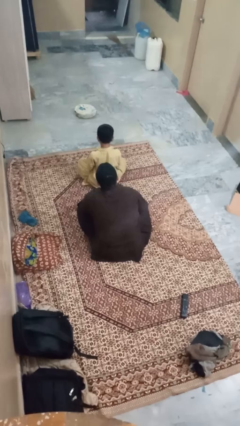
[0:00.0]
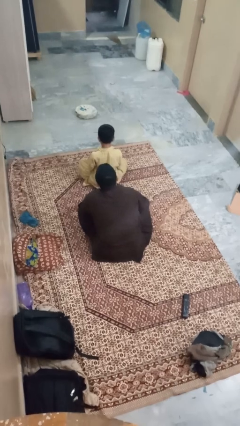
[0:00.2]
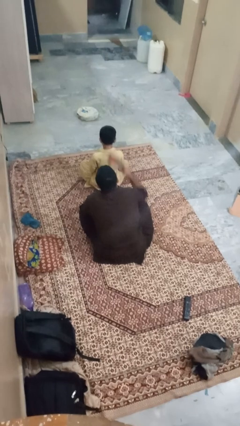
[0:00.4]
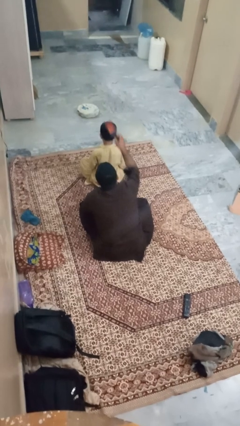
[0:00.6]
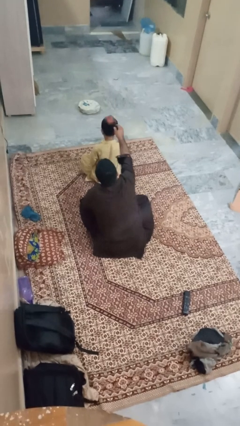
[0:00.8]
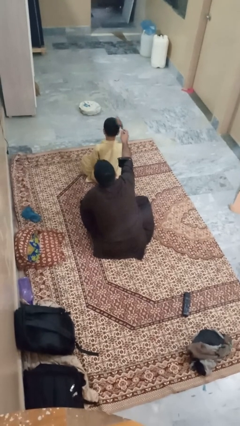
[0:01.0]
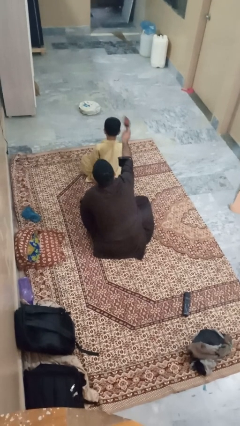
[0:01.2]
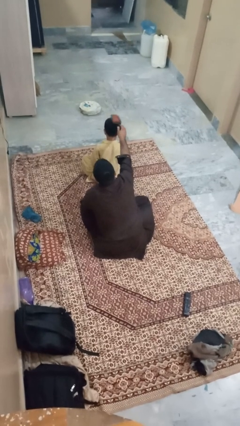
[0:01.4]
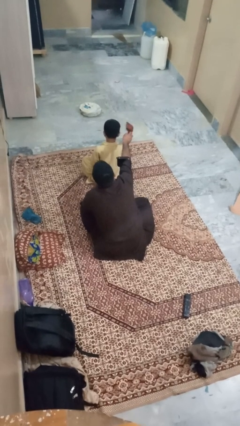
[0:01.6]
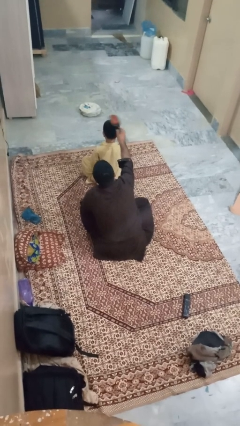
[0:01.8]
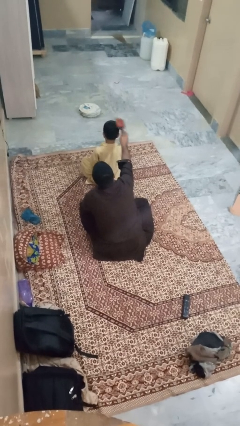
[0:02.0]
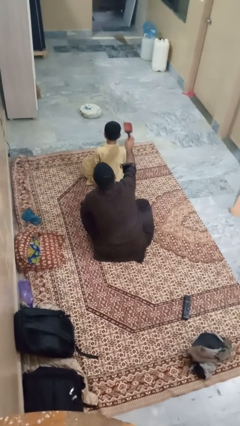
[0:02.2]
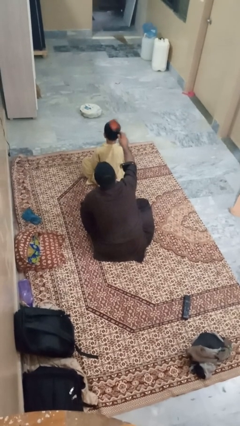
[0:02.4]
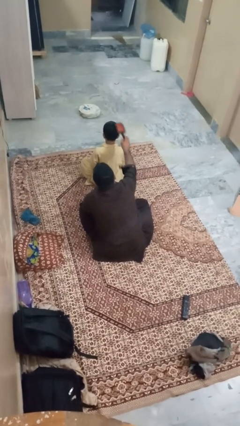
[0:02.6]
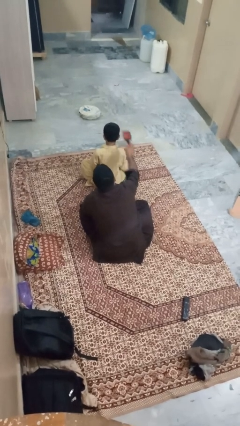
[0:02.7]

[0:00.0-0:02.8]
person brushes hair of person

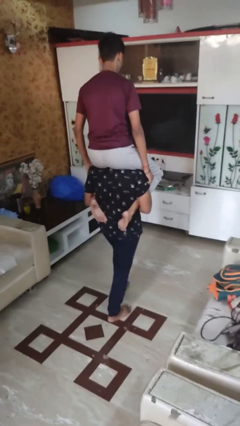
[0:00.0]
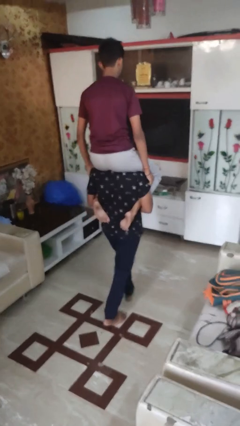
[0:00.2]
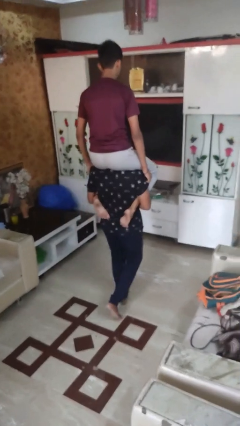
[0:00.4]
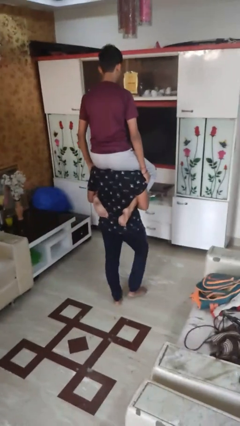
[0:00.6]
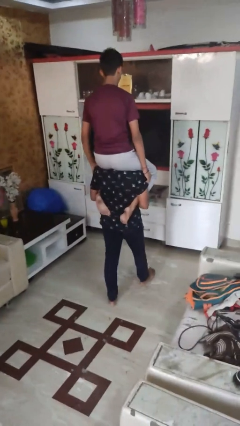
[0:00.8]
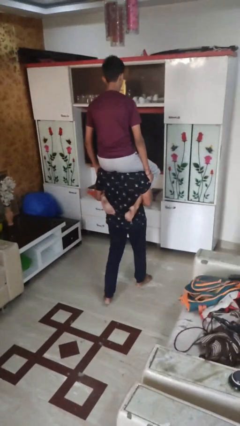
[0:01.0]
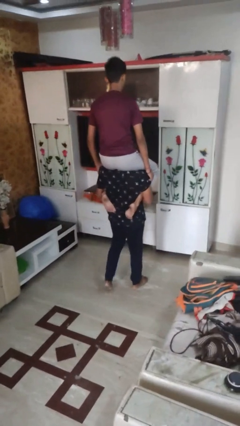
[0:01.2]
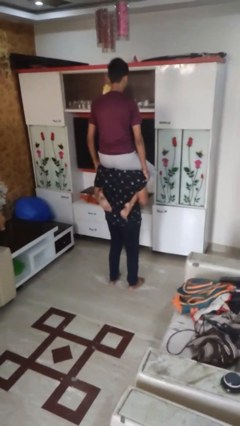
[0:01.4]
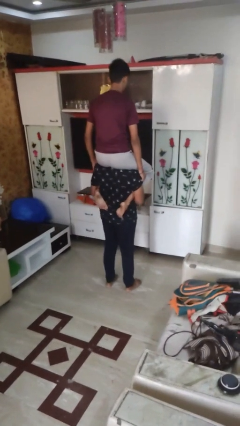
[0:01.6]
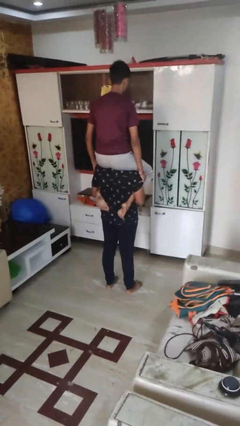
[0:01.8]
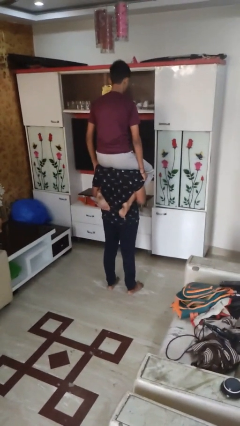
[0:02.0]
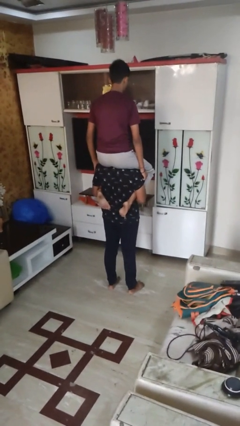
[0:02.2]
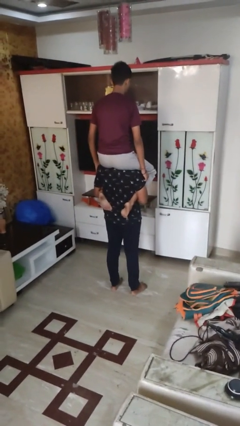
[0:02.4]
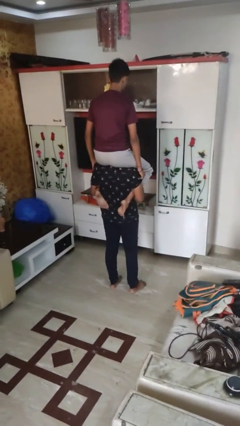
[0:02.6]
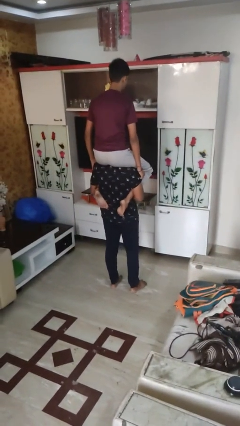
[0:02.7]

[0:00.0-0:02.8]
person carries person on shoulders

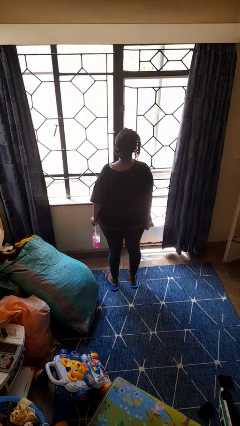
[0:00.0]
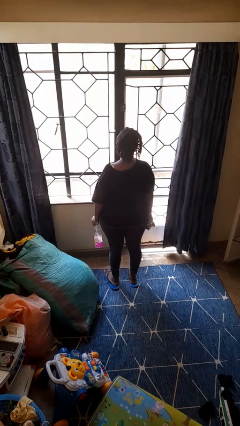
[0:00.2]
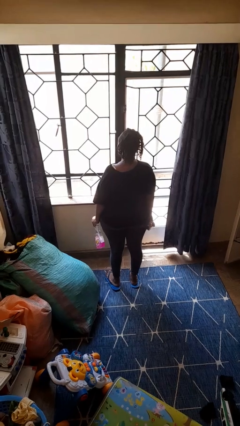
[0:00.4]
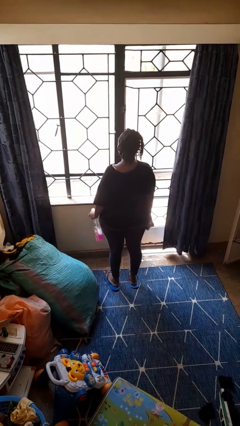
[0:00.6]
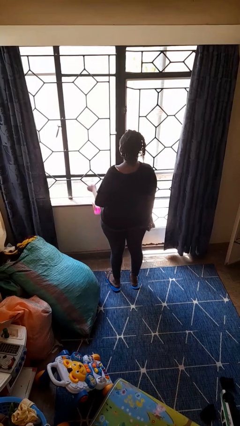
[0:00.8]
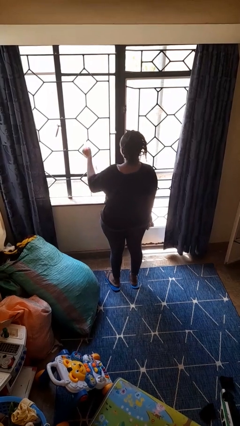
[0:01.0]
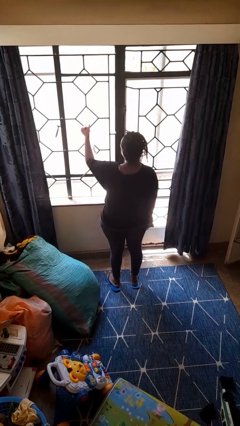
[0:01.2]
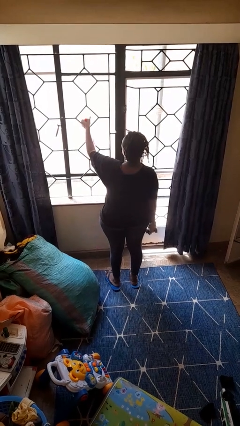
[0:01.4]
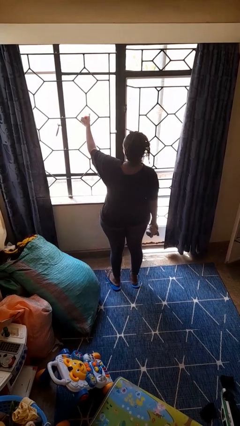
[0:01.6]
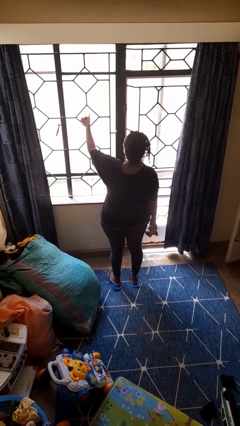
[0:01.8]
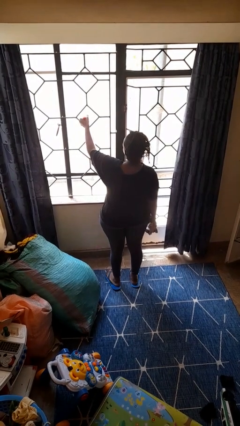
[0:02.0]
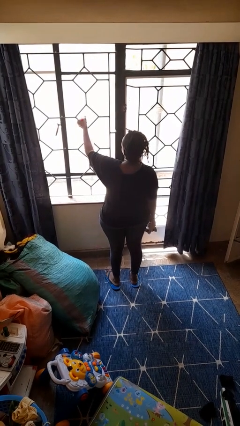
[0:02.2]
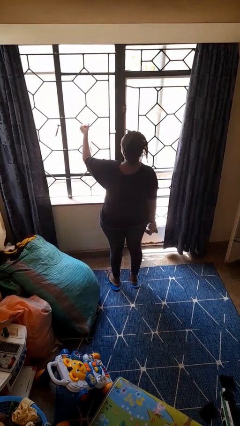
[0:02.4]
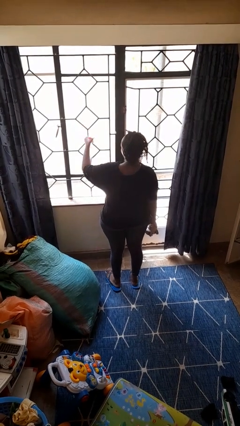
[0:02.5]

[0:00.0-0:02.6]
person sprays from bottle

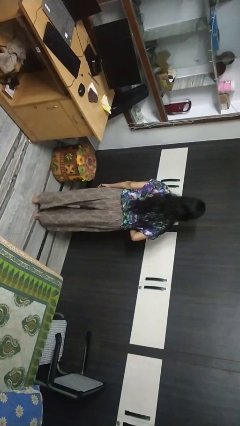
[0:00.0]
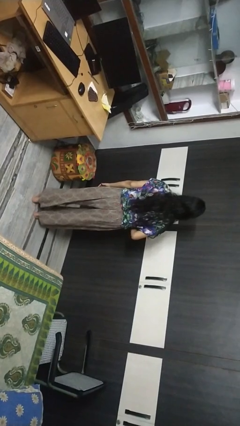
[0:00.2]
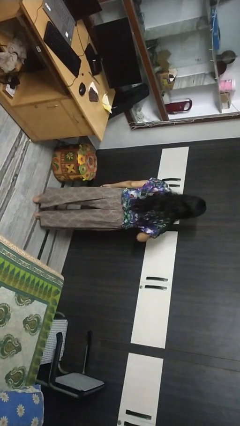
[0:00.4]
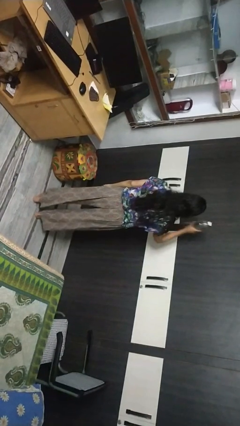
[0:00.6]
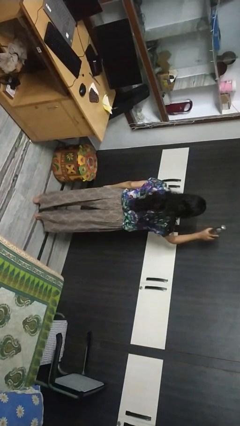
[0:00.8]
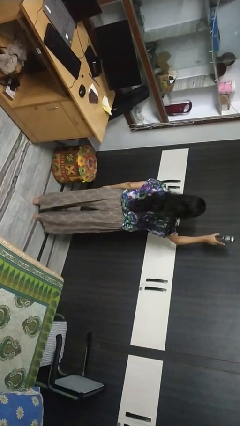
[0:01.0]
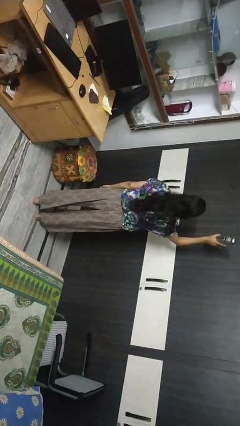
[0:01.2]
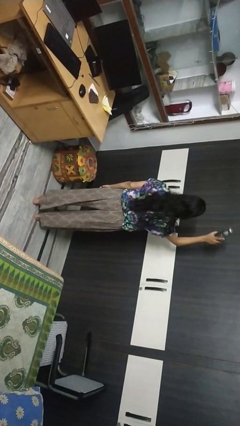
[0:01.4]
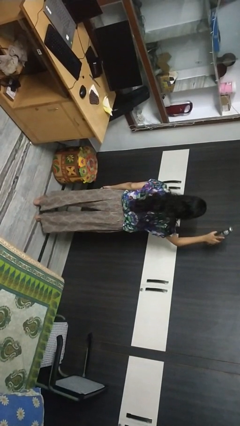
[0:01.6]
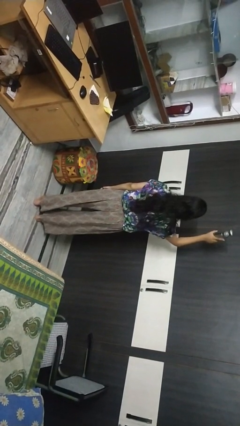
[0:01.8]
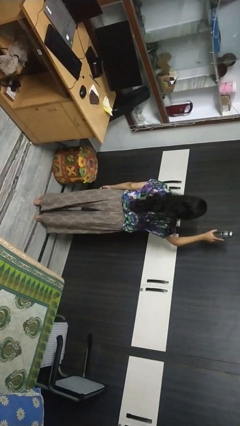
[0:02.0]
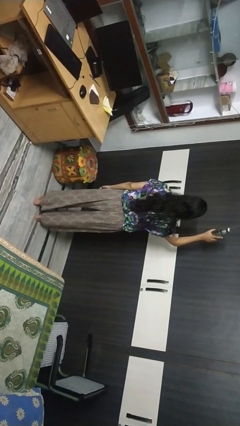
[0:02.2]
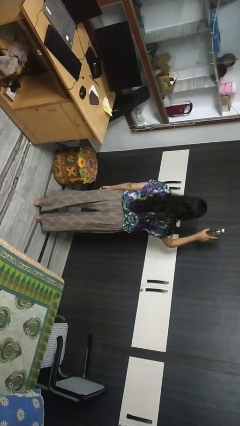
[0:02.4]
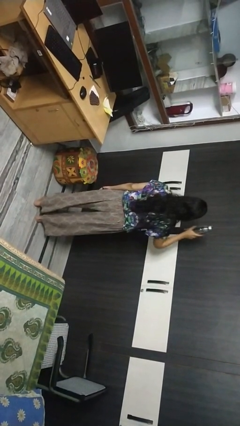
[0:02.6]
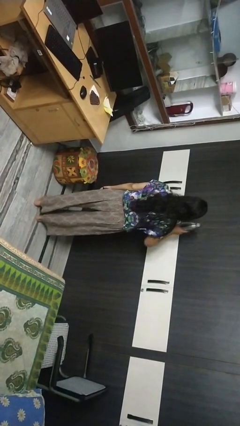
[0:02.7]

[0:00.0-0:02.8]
person holds object above head

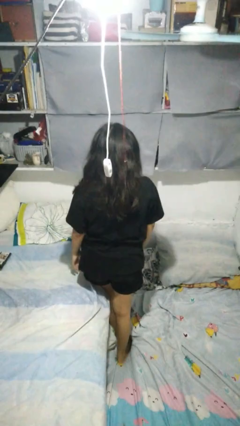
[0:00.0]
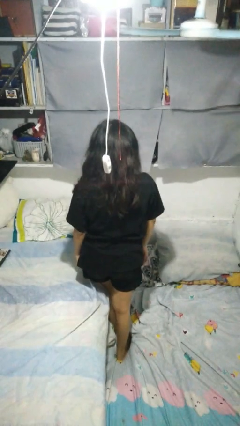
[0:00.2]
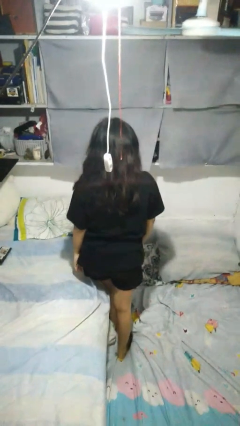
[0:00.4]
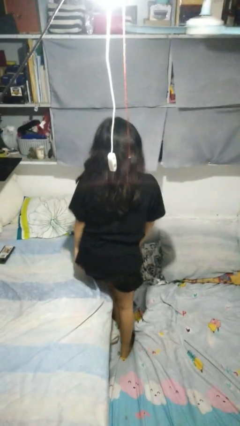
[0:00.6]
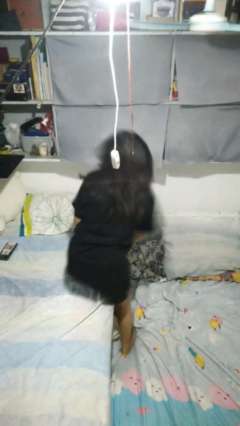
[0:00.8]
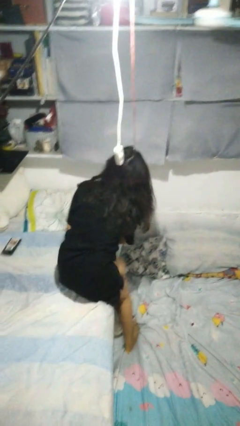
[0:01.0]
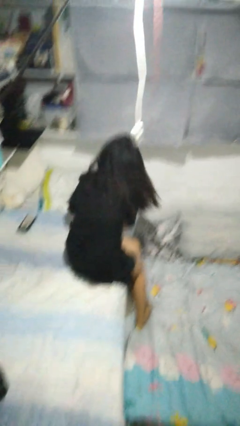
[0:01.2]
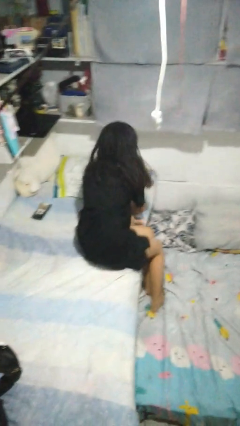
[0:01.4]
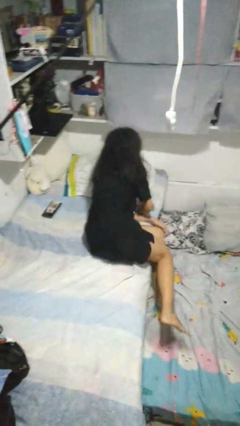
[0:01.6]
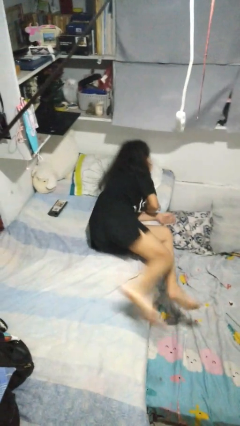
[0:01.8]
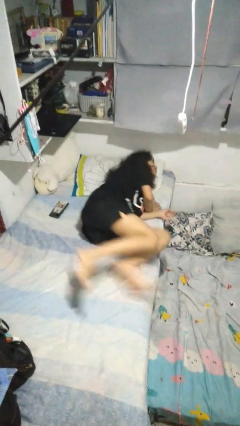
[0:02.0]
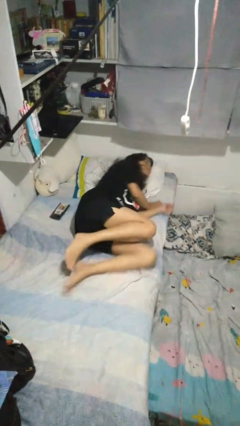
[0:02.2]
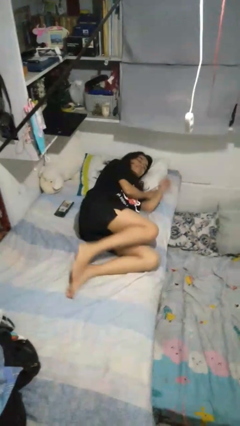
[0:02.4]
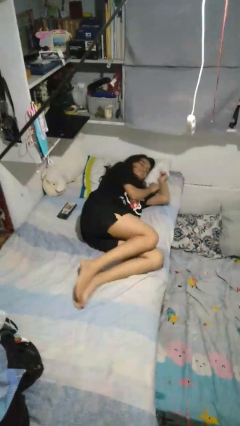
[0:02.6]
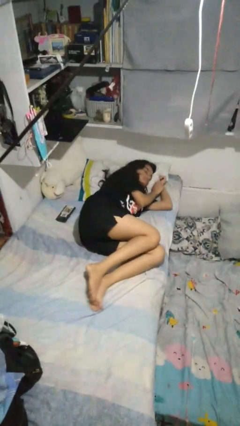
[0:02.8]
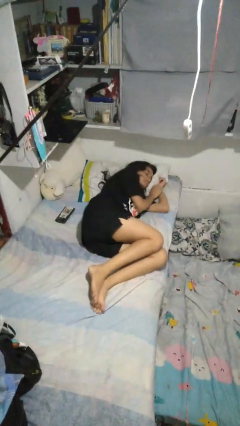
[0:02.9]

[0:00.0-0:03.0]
person lies down on bed

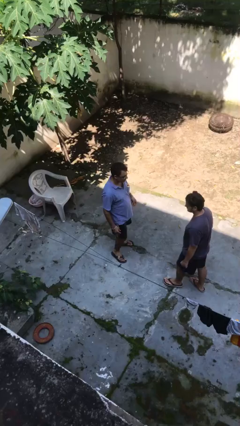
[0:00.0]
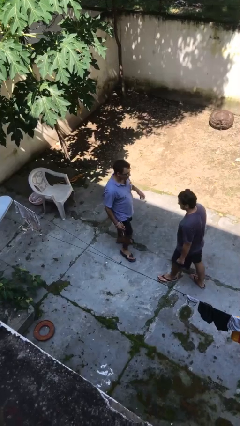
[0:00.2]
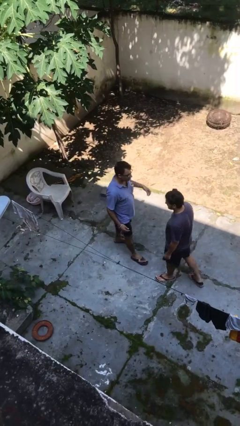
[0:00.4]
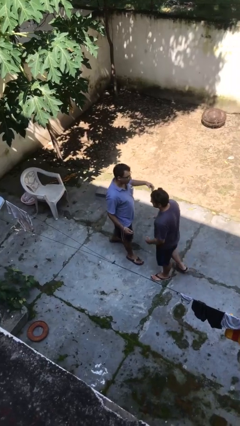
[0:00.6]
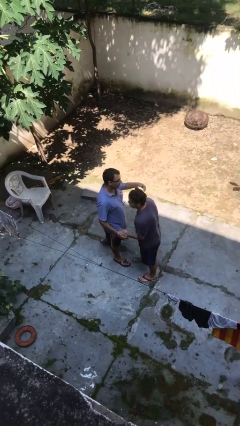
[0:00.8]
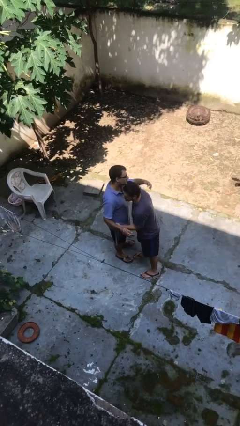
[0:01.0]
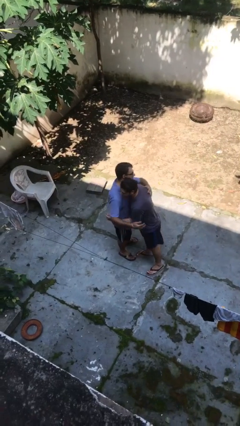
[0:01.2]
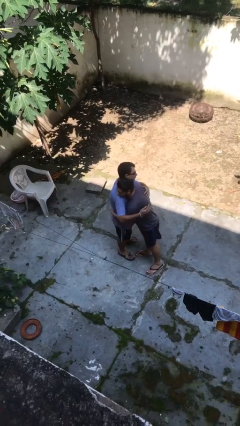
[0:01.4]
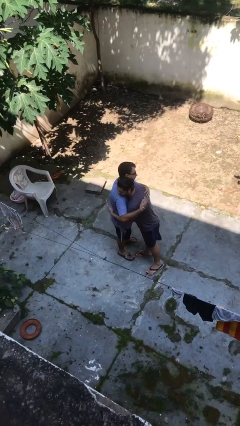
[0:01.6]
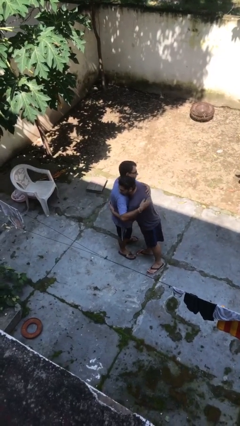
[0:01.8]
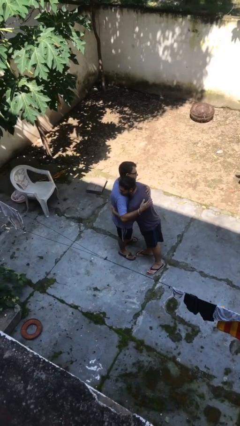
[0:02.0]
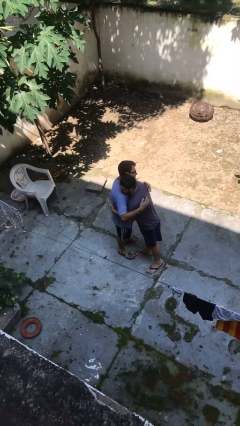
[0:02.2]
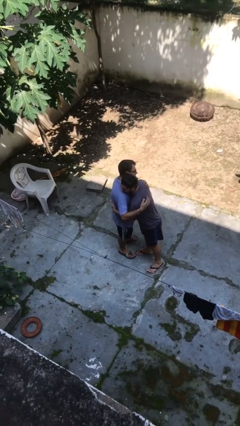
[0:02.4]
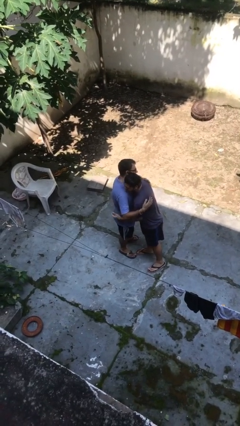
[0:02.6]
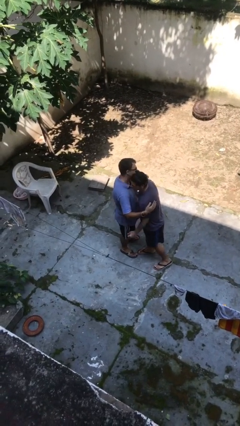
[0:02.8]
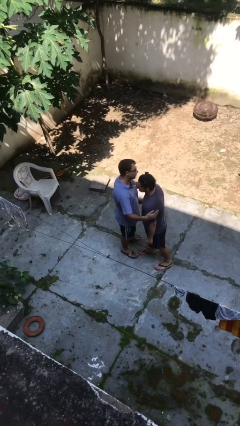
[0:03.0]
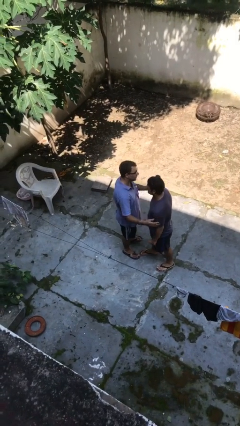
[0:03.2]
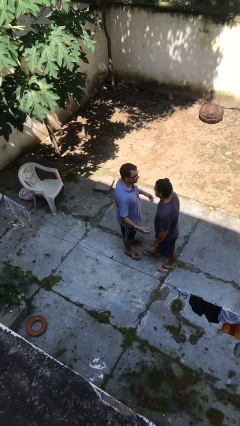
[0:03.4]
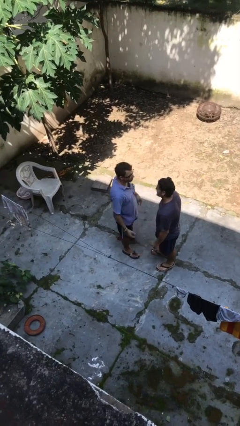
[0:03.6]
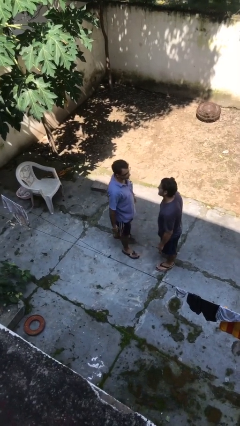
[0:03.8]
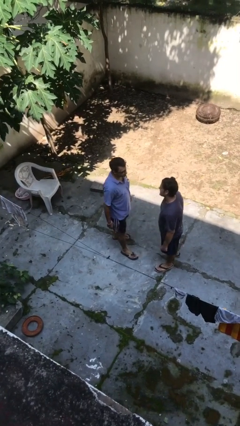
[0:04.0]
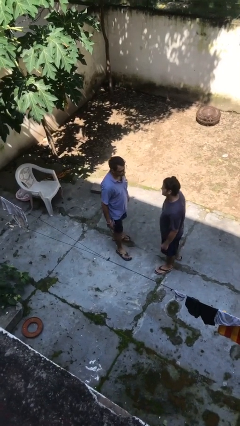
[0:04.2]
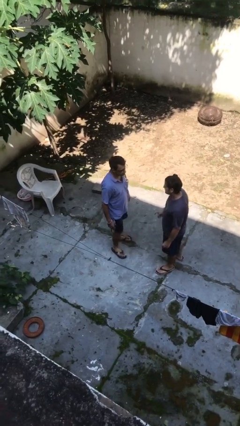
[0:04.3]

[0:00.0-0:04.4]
person embraces person
